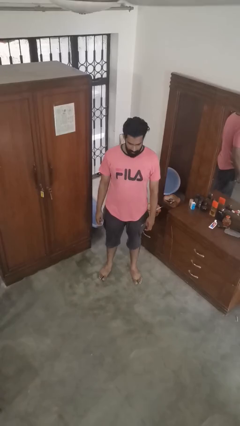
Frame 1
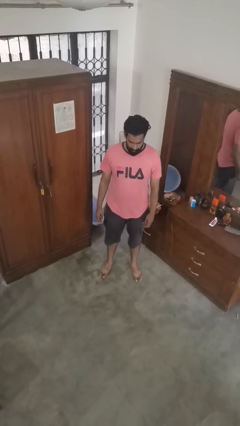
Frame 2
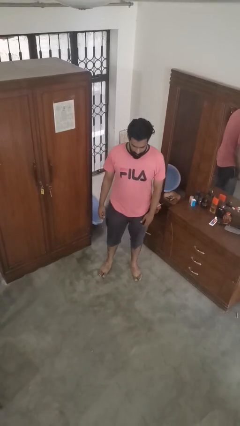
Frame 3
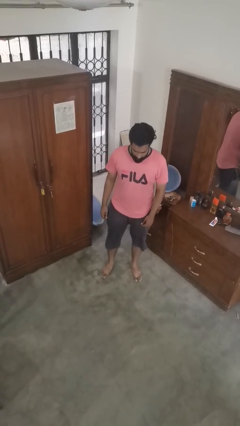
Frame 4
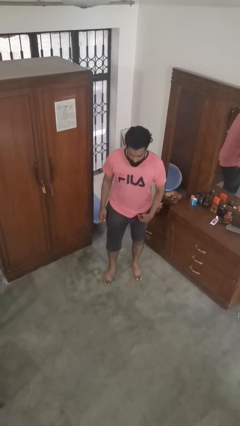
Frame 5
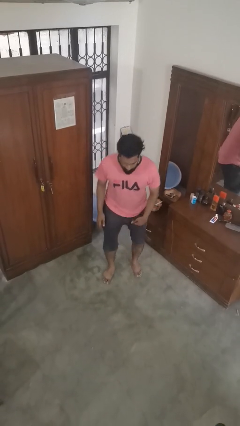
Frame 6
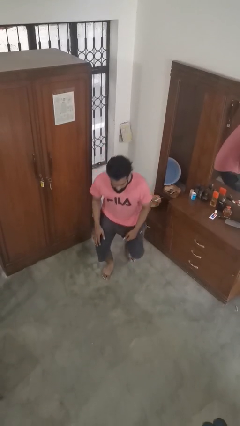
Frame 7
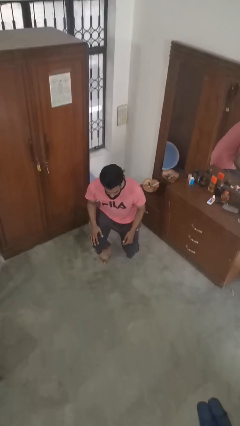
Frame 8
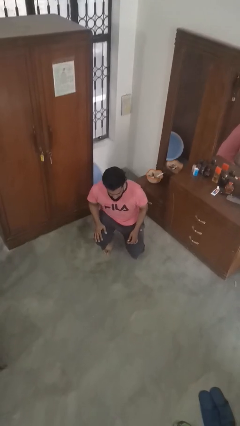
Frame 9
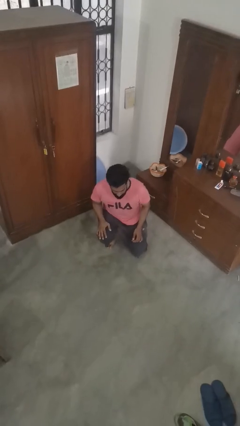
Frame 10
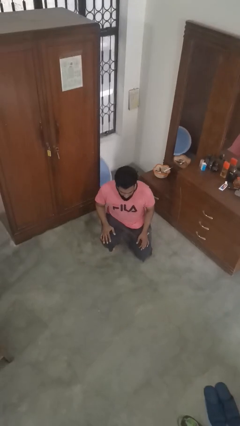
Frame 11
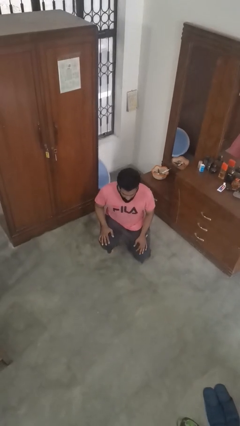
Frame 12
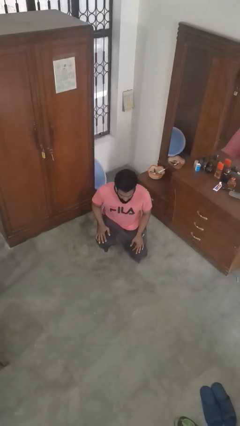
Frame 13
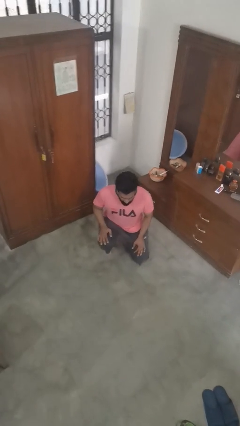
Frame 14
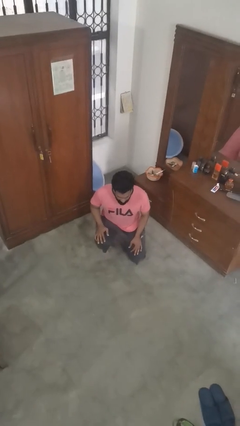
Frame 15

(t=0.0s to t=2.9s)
person kneels

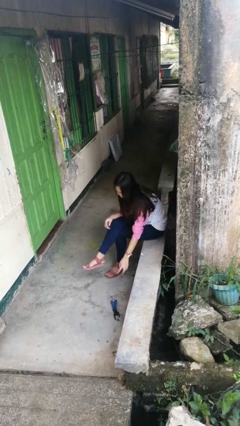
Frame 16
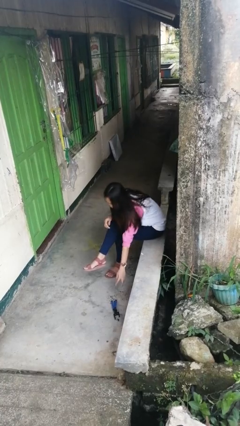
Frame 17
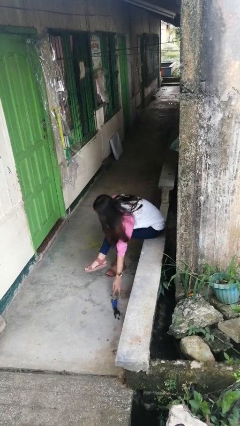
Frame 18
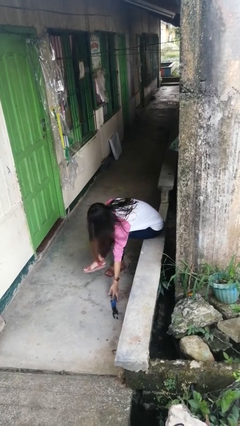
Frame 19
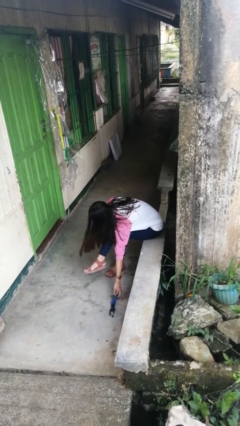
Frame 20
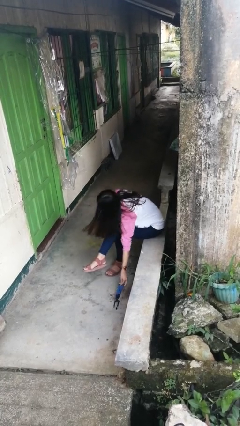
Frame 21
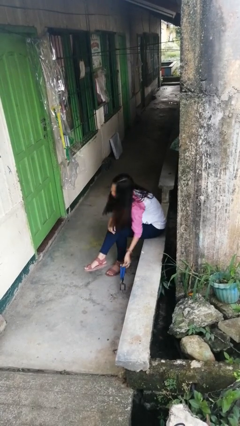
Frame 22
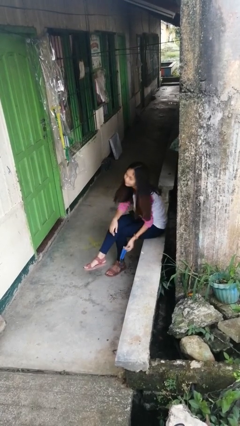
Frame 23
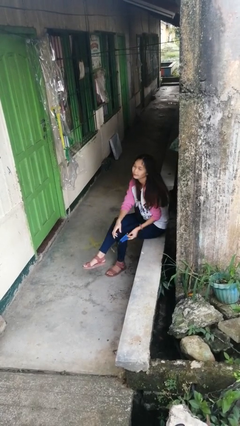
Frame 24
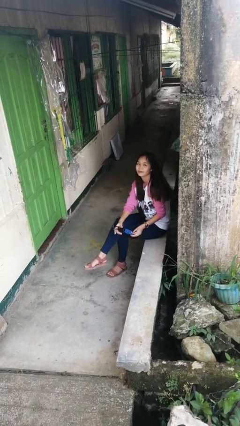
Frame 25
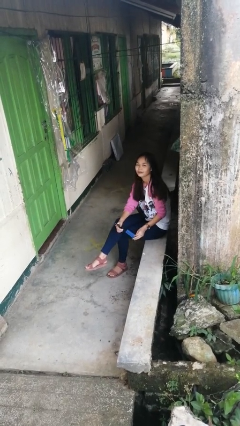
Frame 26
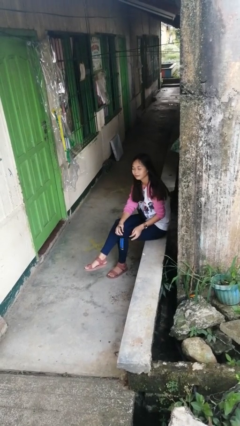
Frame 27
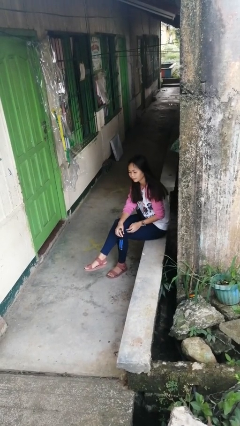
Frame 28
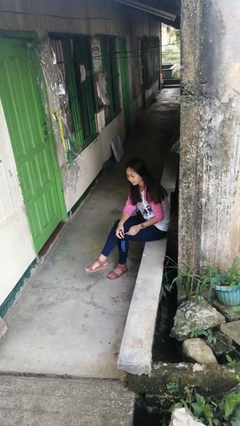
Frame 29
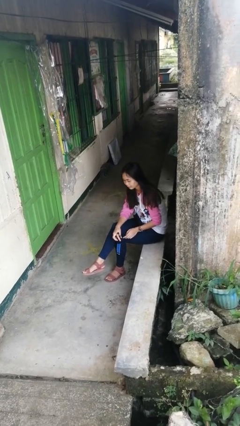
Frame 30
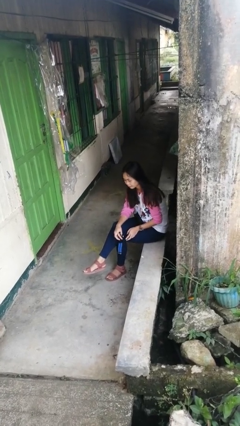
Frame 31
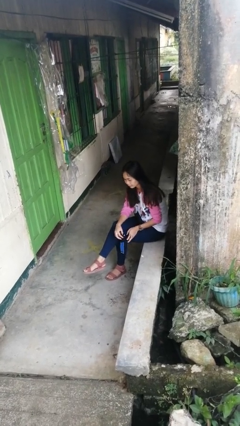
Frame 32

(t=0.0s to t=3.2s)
person picks up object from floor

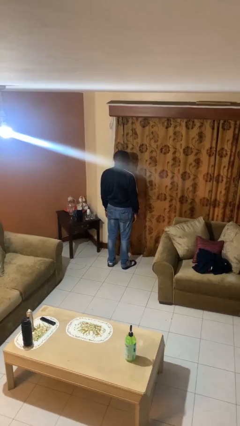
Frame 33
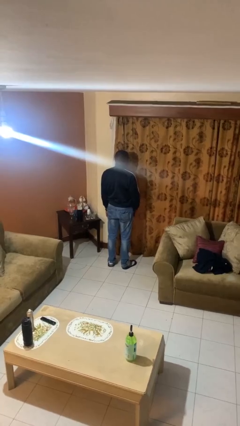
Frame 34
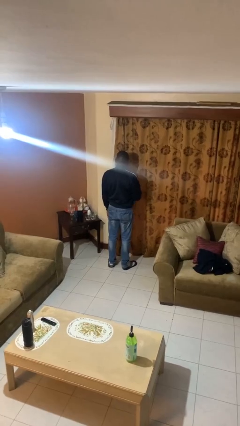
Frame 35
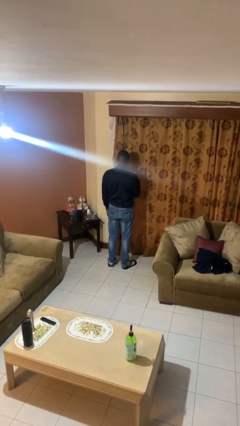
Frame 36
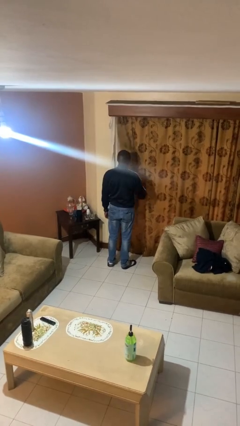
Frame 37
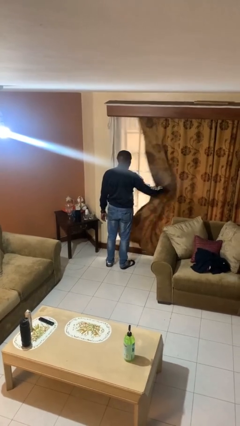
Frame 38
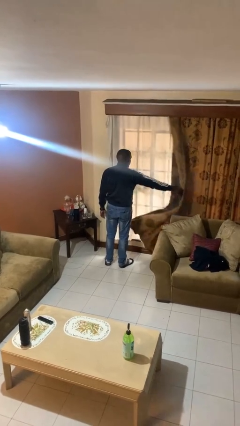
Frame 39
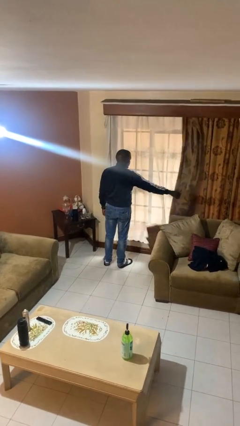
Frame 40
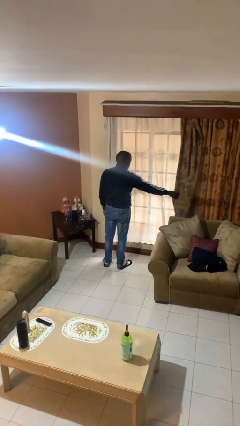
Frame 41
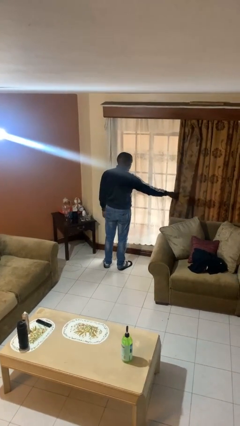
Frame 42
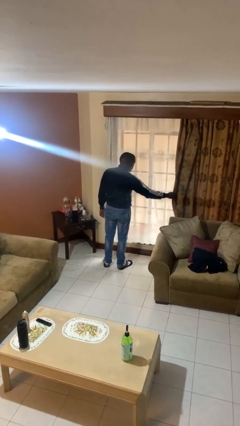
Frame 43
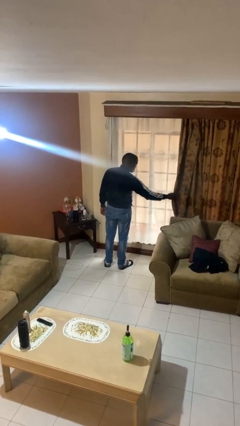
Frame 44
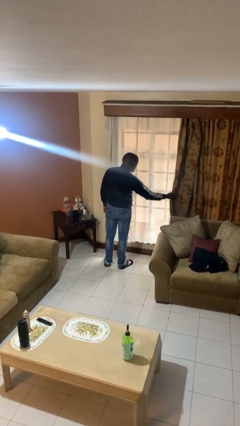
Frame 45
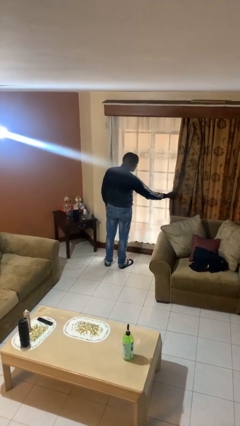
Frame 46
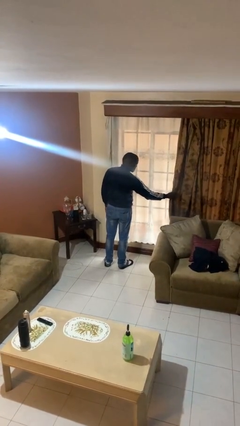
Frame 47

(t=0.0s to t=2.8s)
person opens curtains

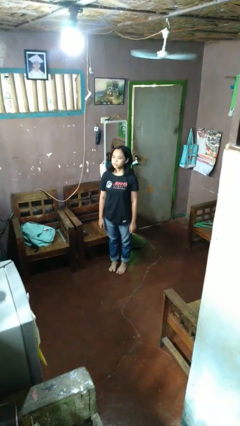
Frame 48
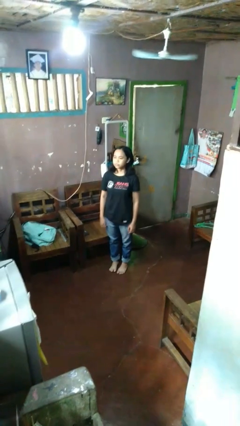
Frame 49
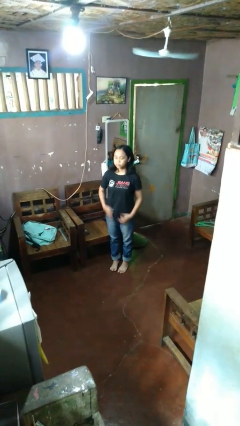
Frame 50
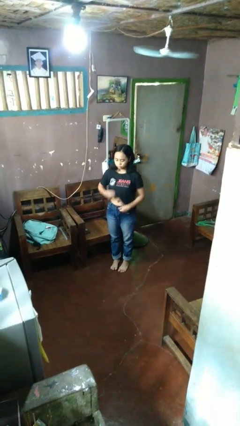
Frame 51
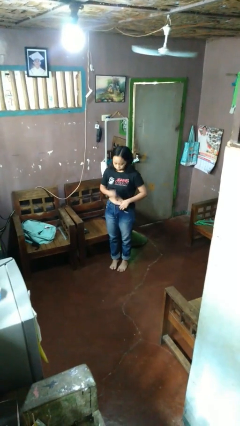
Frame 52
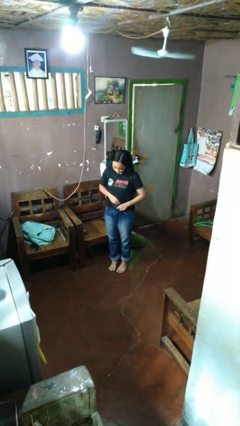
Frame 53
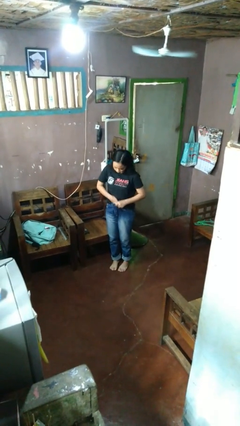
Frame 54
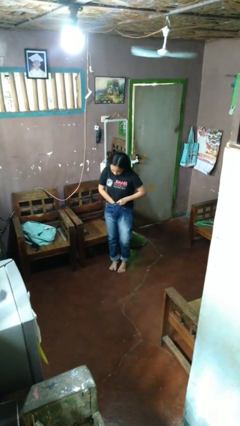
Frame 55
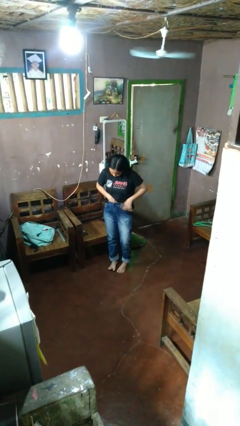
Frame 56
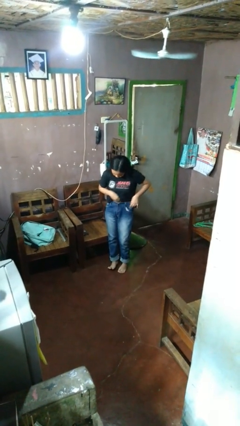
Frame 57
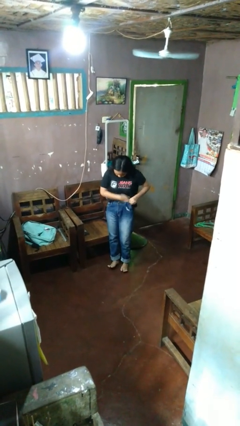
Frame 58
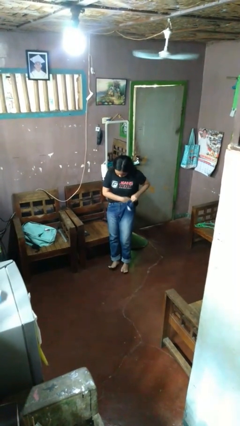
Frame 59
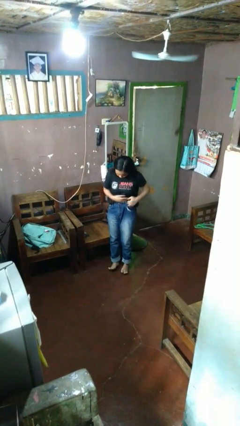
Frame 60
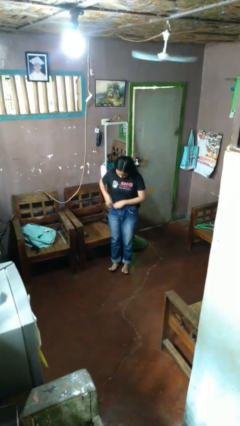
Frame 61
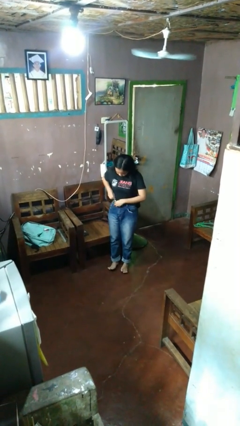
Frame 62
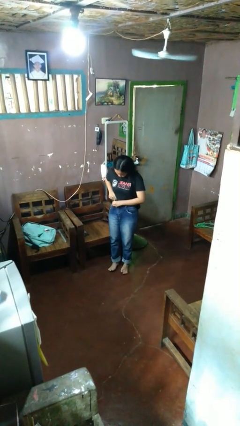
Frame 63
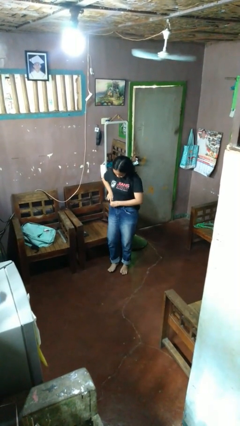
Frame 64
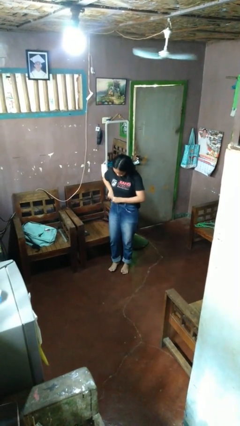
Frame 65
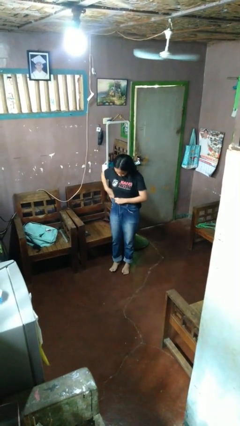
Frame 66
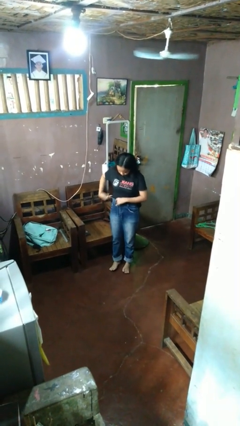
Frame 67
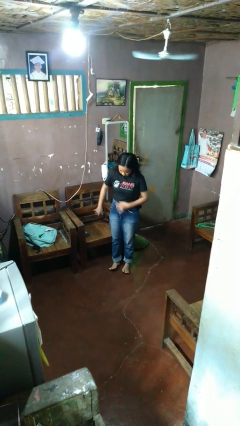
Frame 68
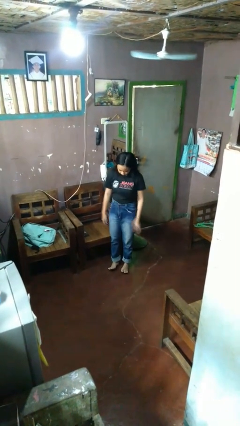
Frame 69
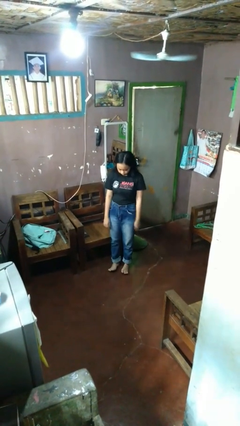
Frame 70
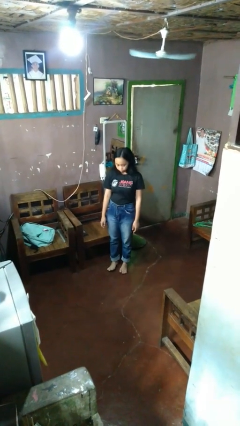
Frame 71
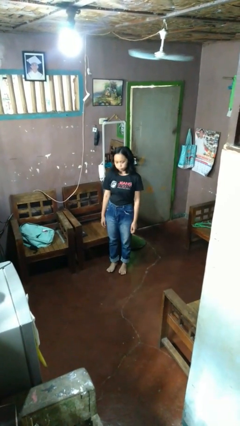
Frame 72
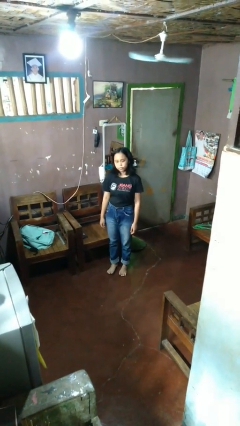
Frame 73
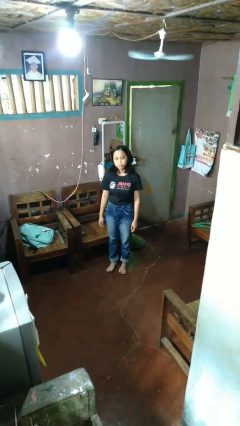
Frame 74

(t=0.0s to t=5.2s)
person tucks in shirt

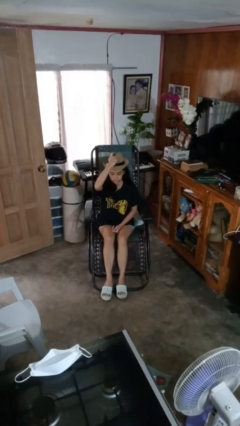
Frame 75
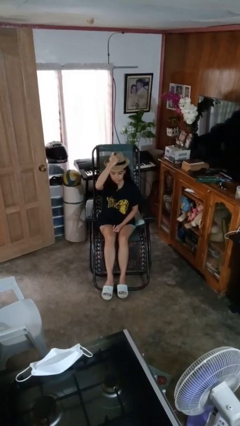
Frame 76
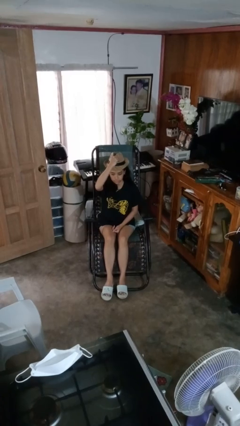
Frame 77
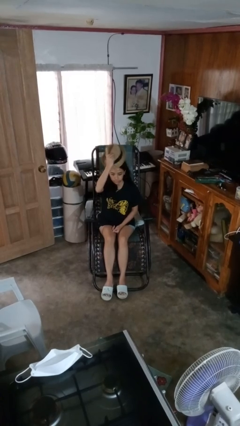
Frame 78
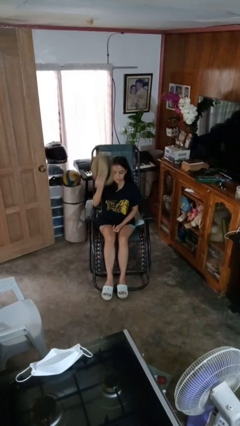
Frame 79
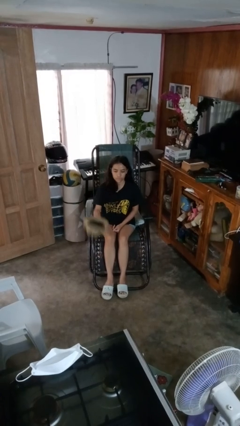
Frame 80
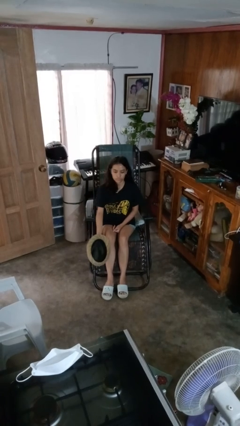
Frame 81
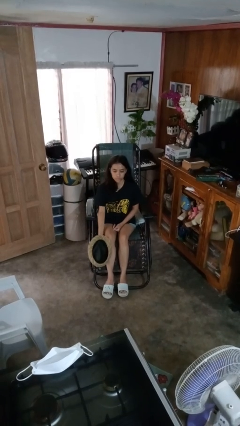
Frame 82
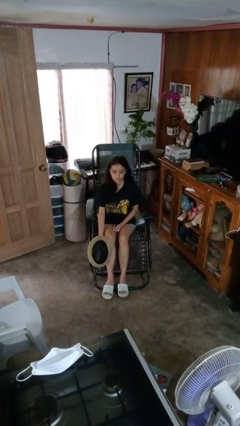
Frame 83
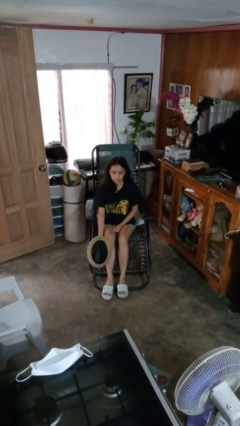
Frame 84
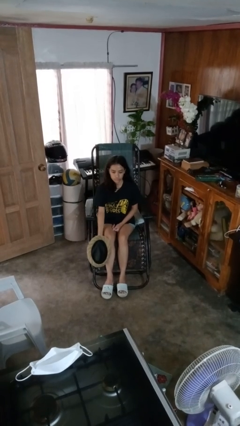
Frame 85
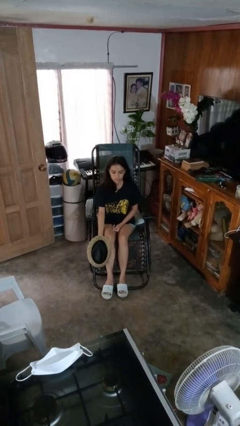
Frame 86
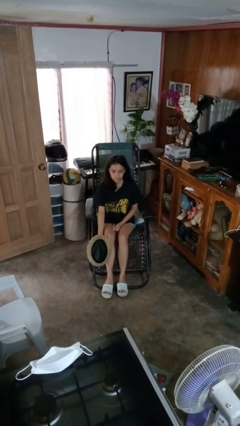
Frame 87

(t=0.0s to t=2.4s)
person takes off hat

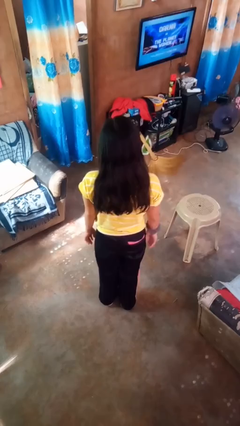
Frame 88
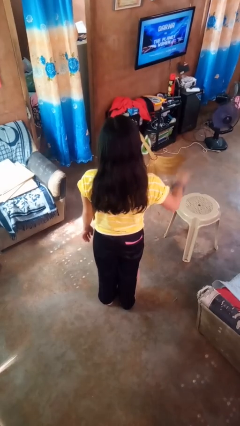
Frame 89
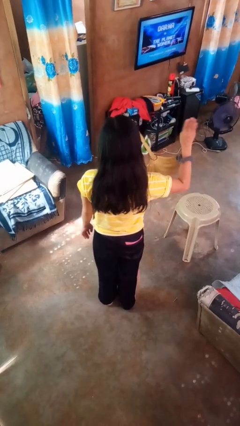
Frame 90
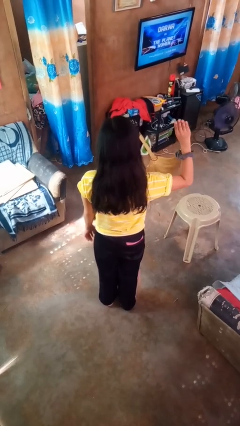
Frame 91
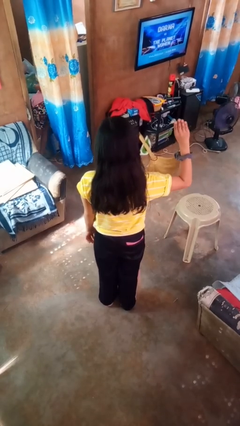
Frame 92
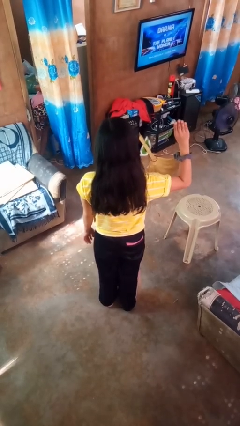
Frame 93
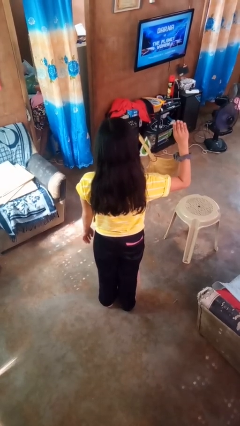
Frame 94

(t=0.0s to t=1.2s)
person gestures number four
